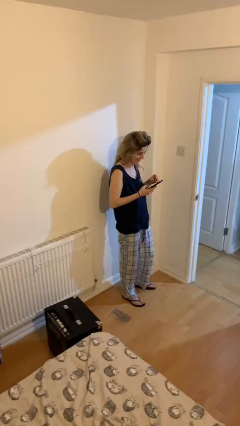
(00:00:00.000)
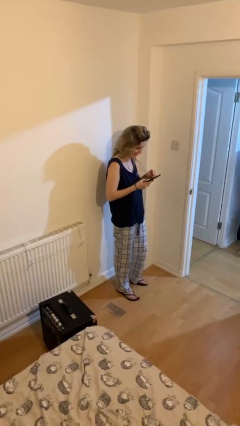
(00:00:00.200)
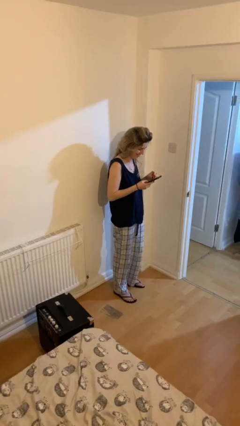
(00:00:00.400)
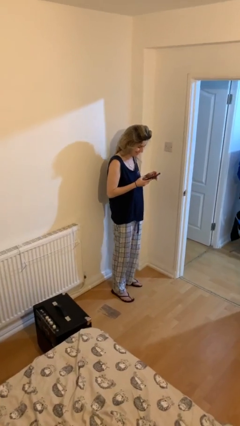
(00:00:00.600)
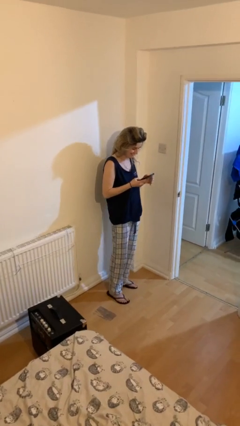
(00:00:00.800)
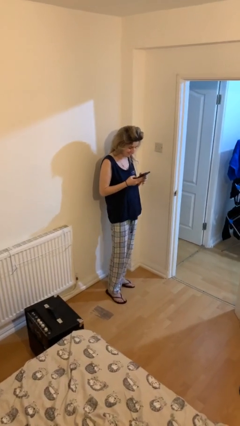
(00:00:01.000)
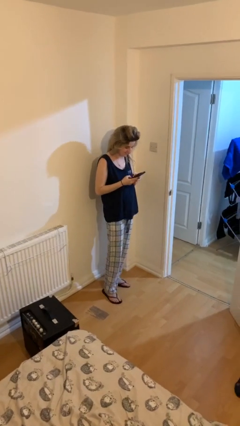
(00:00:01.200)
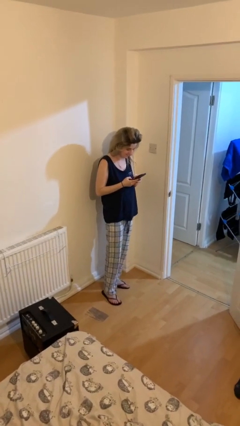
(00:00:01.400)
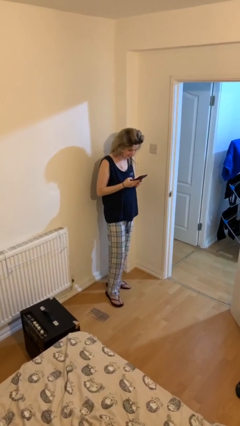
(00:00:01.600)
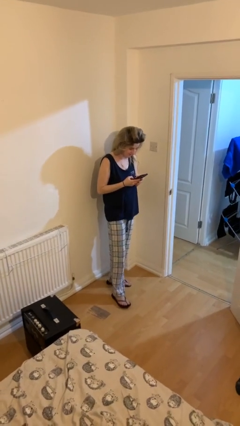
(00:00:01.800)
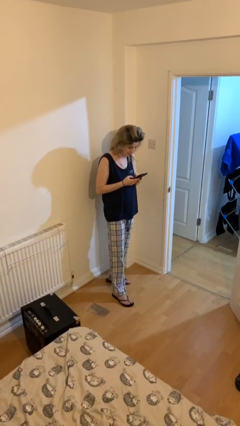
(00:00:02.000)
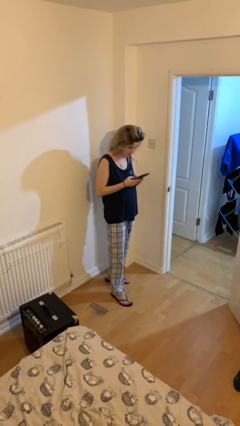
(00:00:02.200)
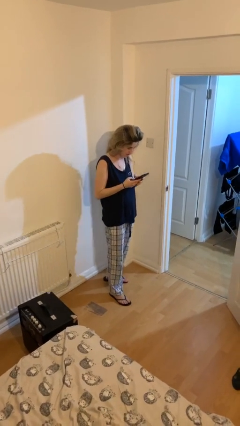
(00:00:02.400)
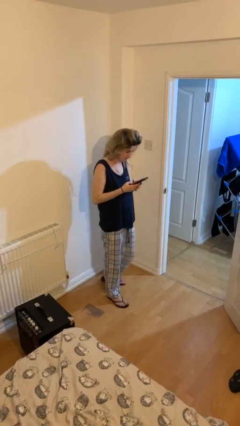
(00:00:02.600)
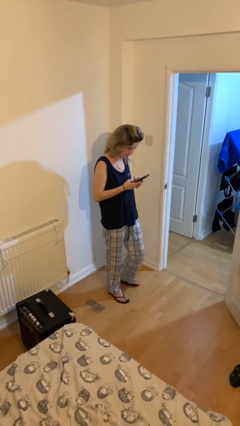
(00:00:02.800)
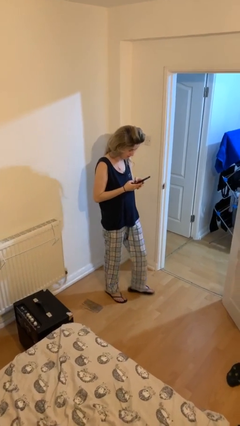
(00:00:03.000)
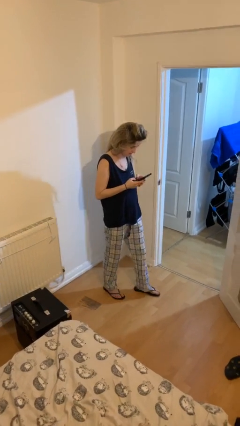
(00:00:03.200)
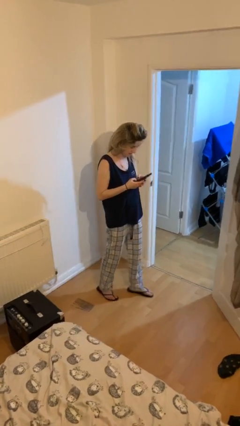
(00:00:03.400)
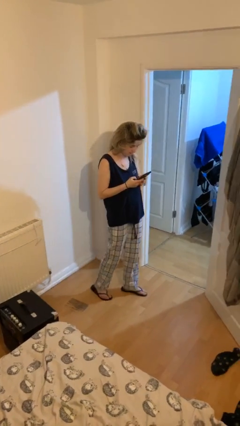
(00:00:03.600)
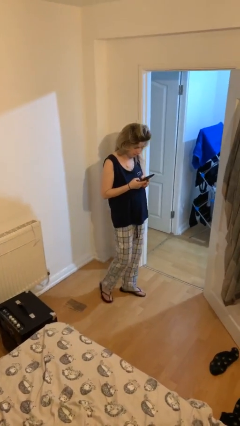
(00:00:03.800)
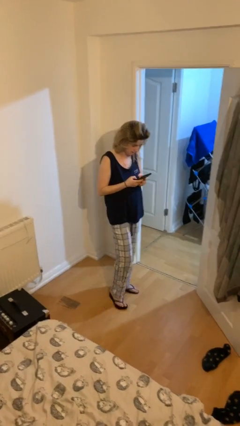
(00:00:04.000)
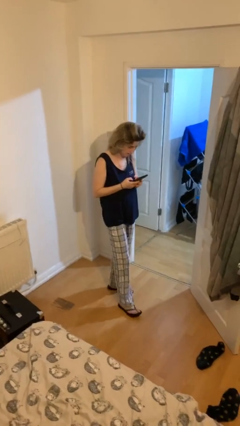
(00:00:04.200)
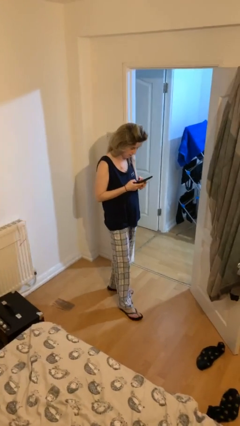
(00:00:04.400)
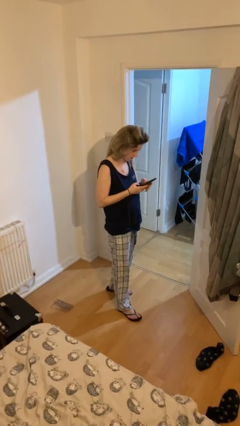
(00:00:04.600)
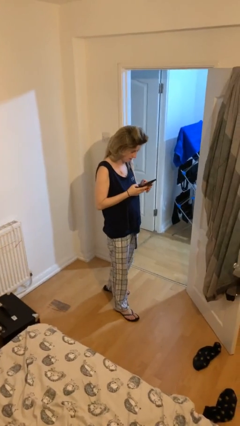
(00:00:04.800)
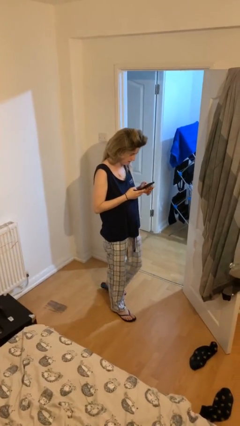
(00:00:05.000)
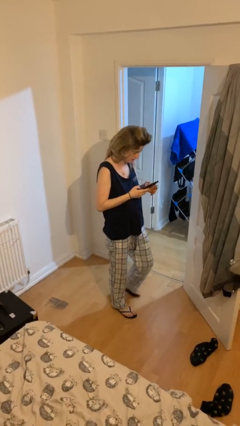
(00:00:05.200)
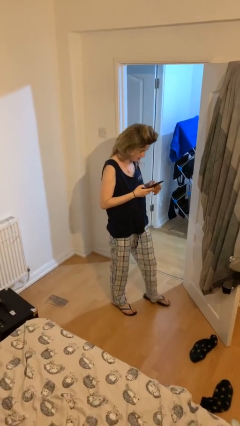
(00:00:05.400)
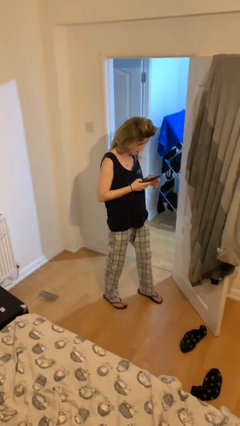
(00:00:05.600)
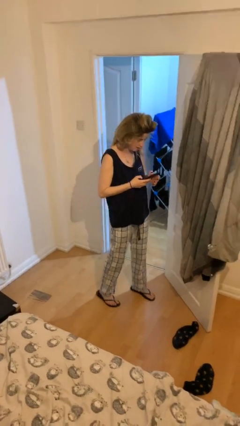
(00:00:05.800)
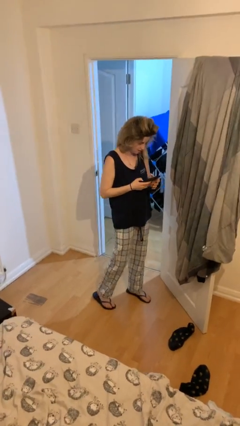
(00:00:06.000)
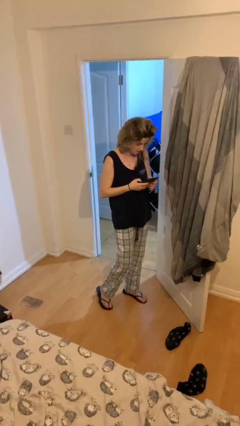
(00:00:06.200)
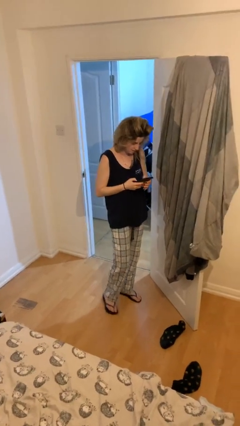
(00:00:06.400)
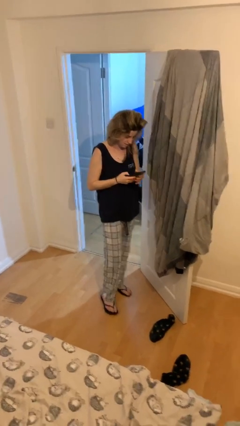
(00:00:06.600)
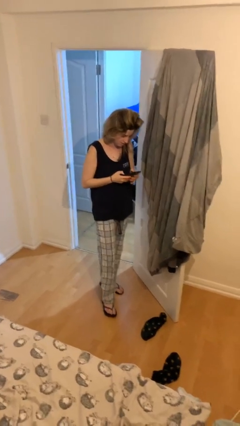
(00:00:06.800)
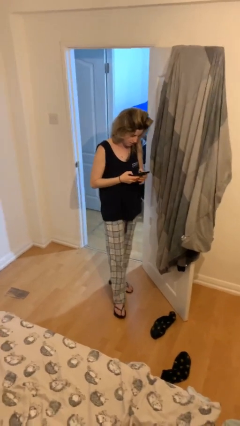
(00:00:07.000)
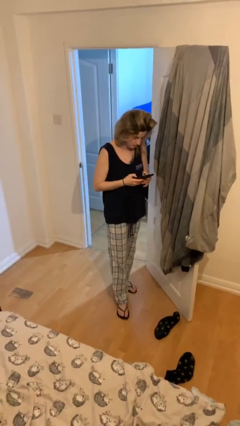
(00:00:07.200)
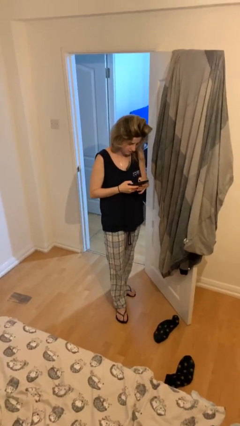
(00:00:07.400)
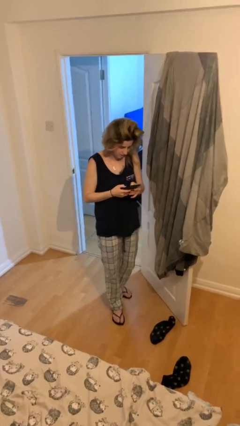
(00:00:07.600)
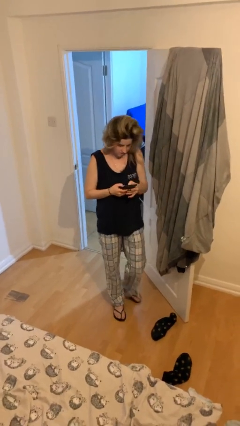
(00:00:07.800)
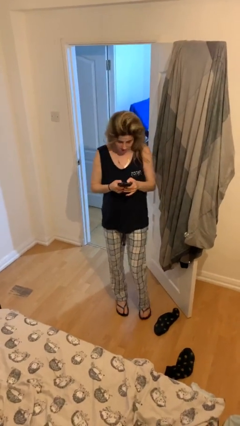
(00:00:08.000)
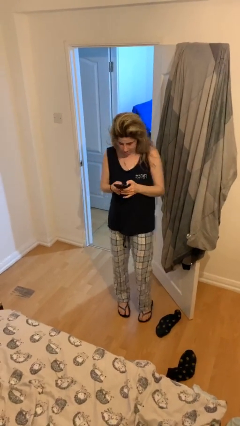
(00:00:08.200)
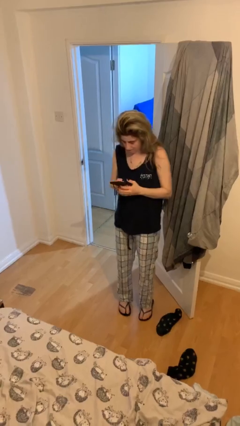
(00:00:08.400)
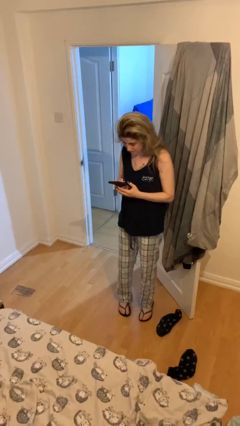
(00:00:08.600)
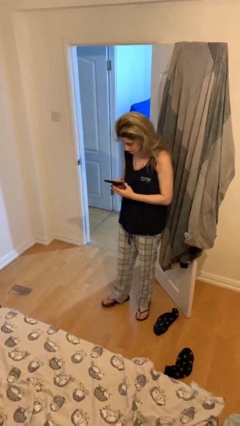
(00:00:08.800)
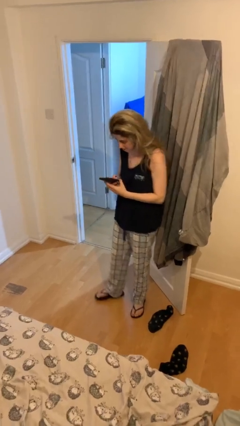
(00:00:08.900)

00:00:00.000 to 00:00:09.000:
person texts on phone

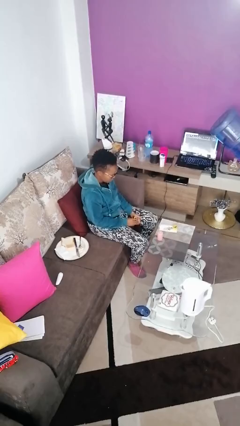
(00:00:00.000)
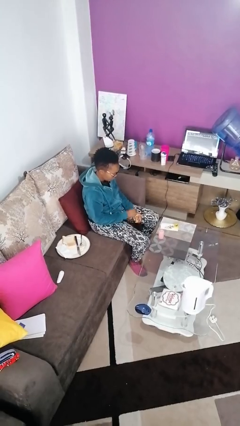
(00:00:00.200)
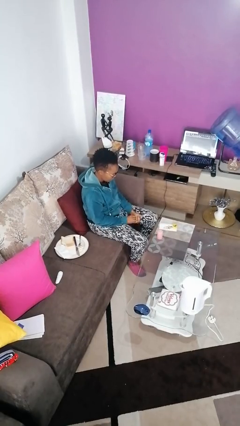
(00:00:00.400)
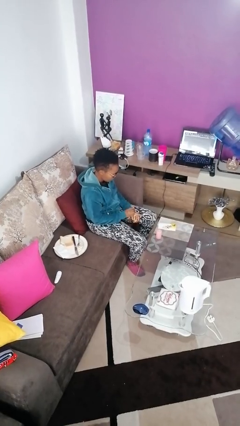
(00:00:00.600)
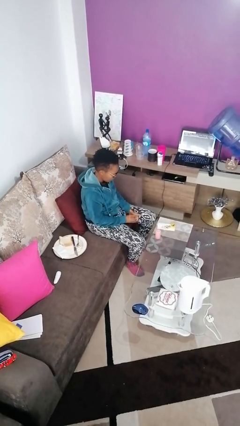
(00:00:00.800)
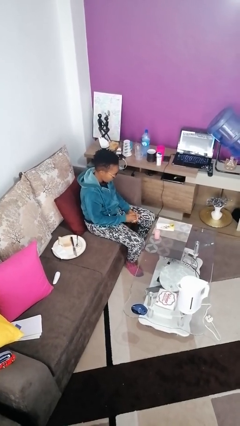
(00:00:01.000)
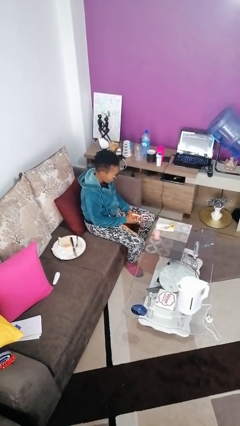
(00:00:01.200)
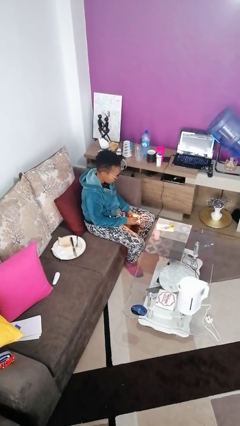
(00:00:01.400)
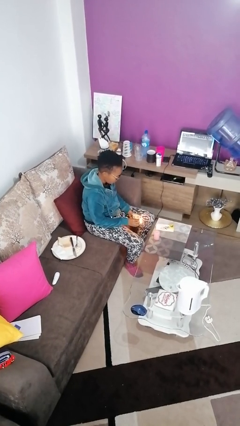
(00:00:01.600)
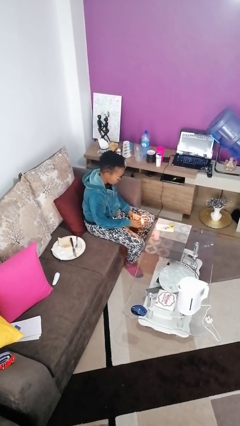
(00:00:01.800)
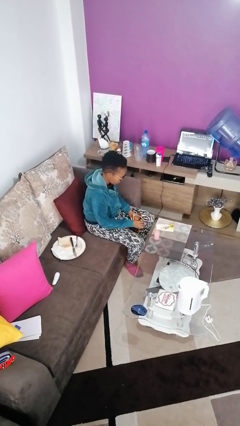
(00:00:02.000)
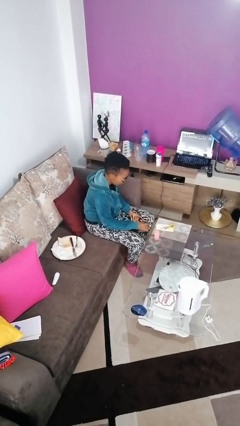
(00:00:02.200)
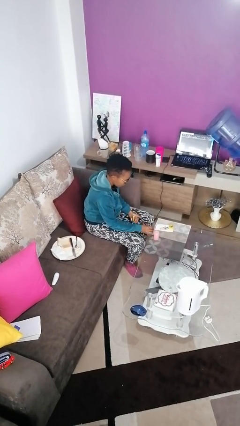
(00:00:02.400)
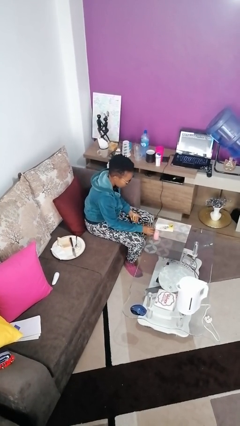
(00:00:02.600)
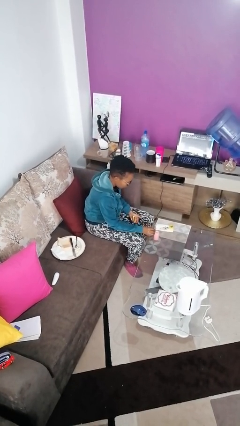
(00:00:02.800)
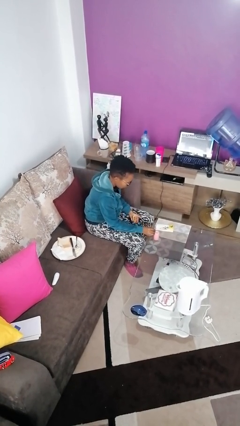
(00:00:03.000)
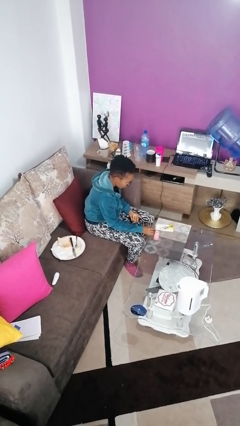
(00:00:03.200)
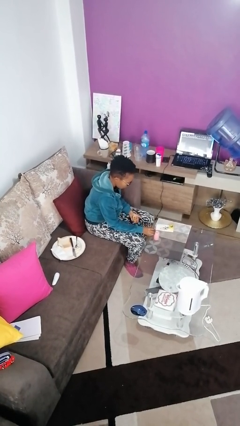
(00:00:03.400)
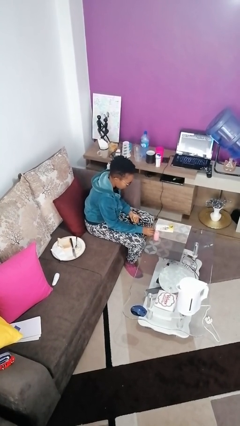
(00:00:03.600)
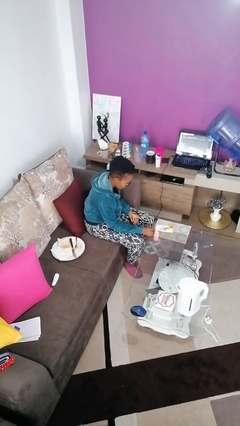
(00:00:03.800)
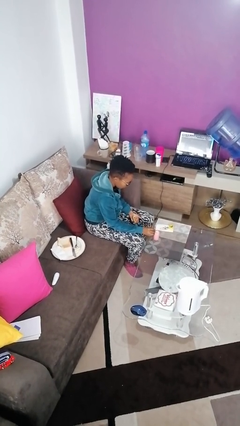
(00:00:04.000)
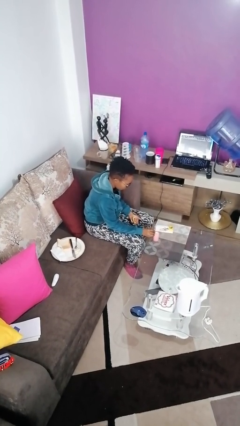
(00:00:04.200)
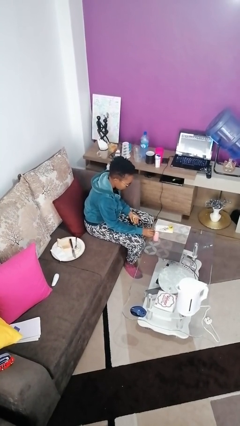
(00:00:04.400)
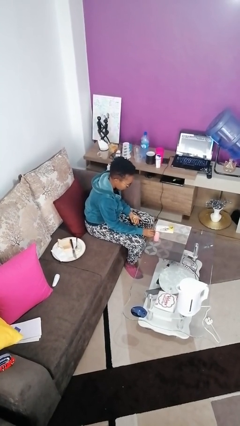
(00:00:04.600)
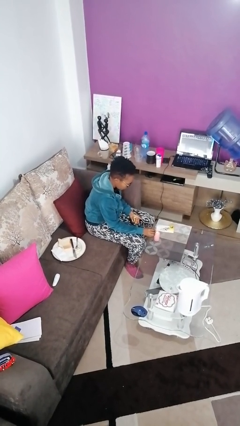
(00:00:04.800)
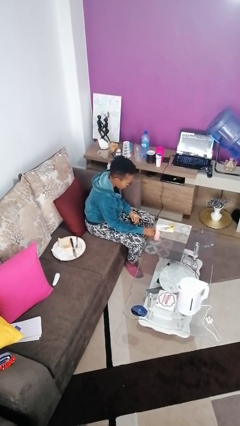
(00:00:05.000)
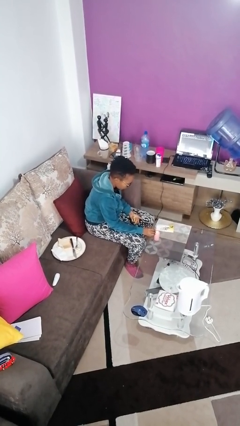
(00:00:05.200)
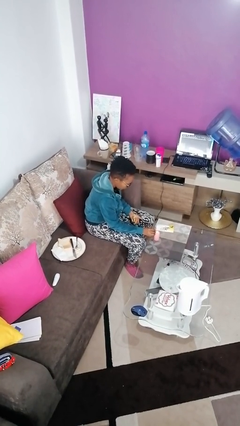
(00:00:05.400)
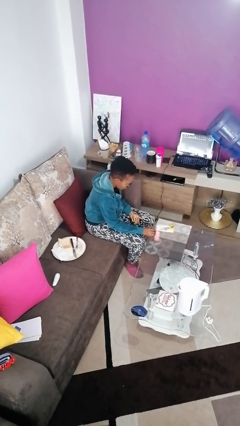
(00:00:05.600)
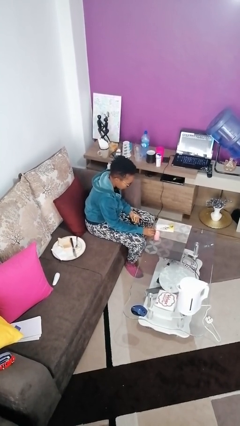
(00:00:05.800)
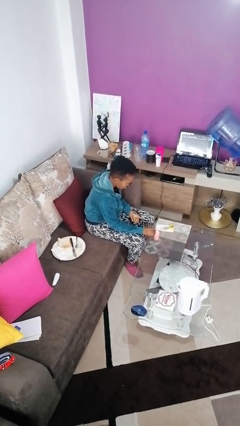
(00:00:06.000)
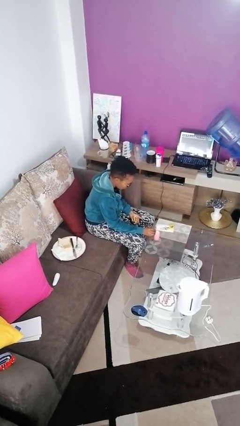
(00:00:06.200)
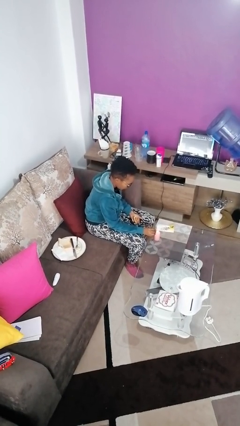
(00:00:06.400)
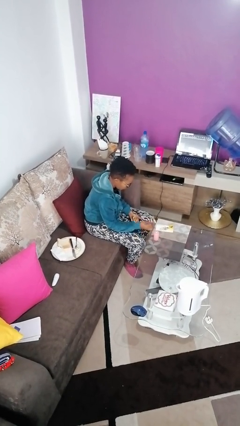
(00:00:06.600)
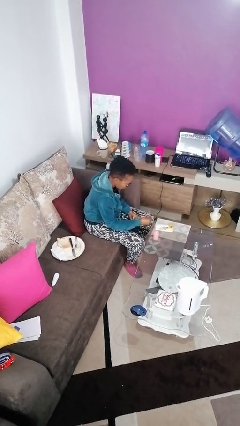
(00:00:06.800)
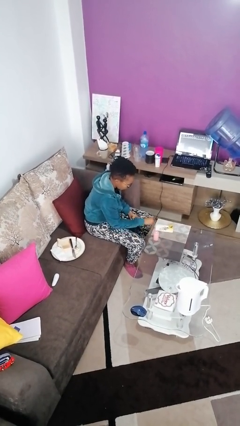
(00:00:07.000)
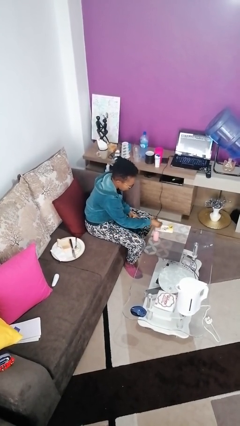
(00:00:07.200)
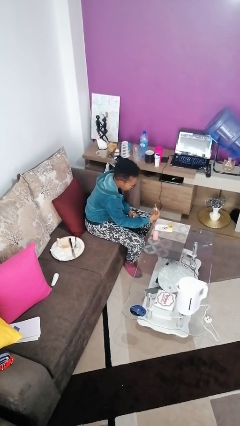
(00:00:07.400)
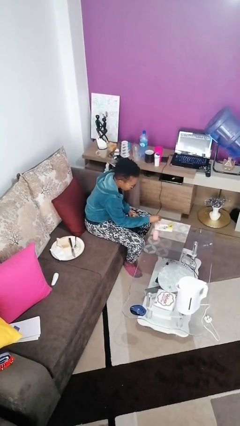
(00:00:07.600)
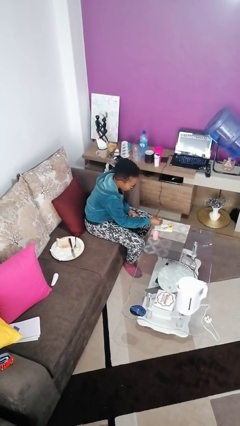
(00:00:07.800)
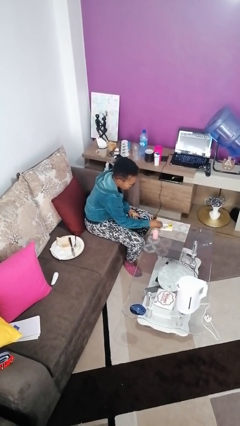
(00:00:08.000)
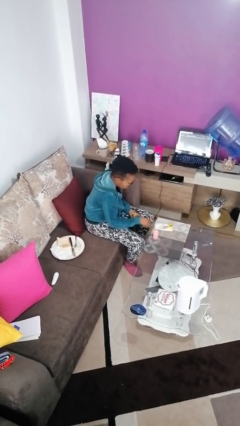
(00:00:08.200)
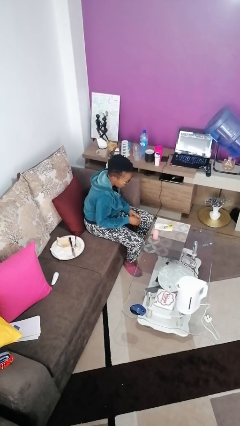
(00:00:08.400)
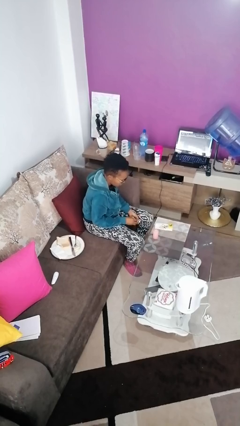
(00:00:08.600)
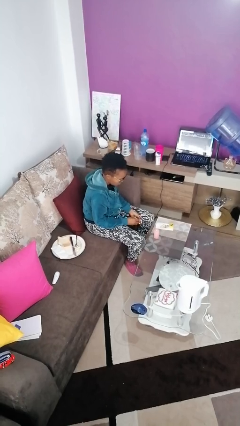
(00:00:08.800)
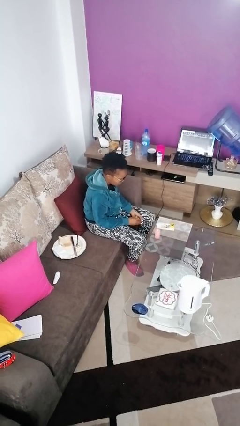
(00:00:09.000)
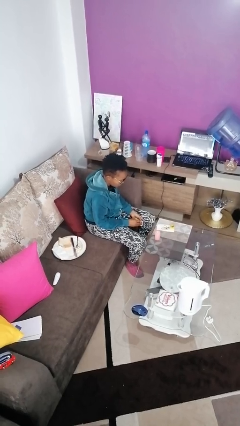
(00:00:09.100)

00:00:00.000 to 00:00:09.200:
person lights candle
